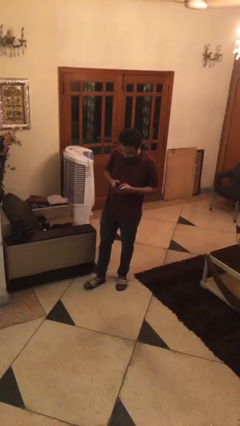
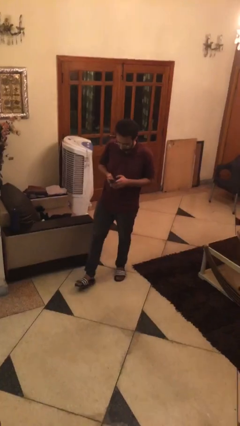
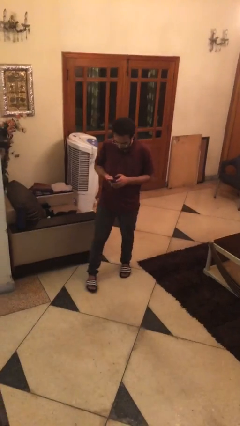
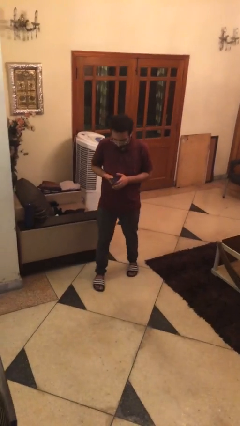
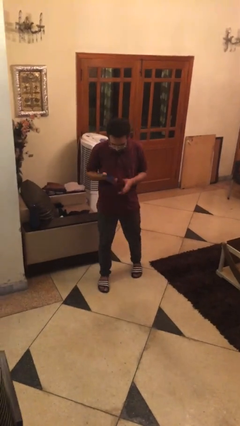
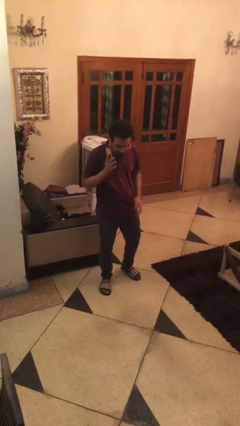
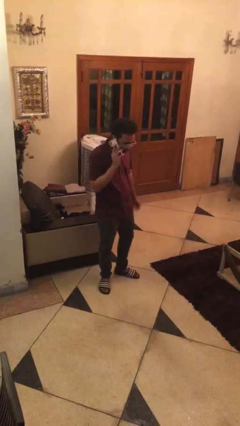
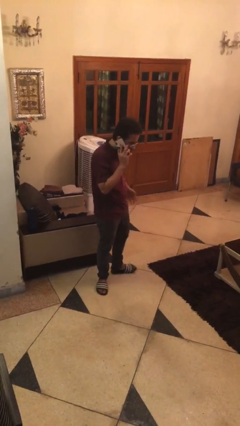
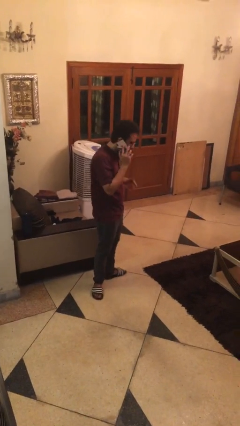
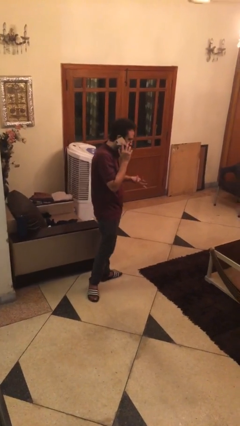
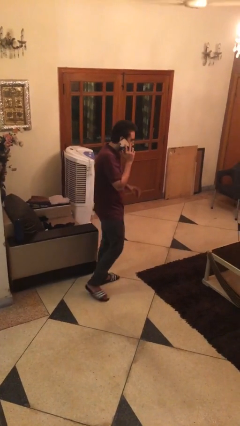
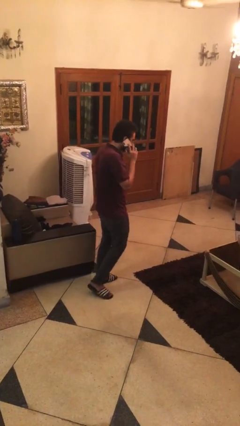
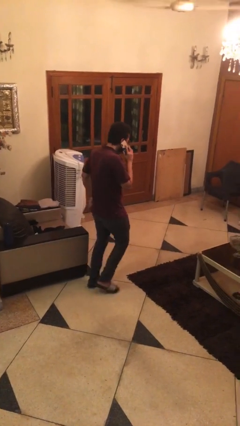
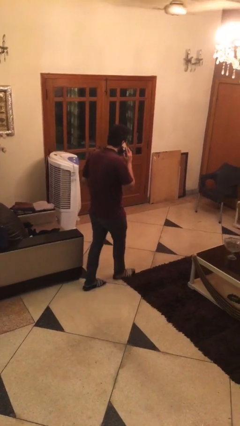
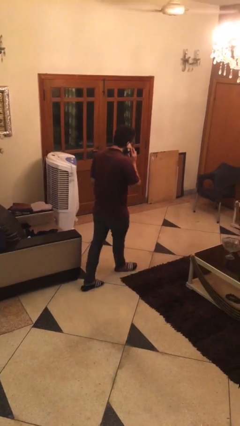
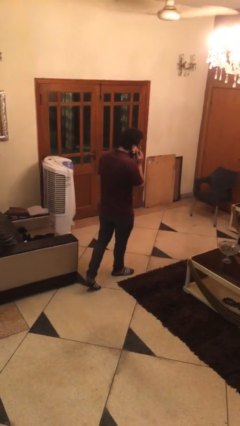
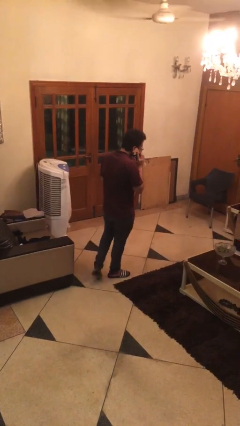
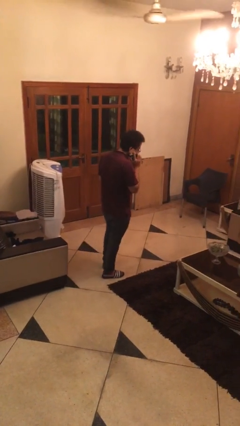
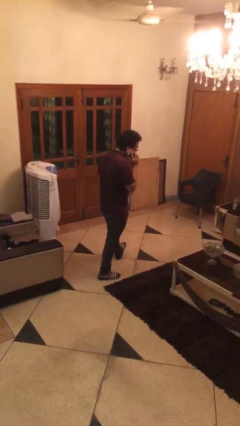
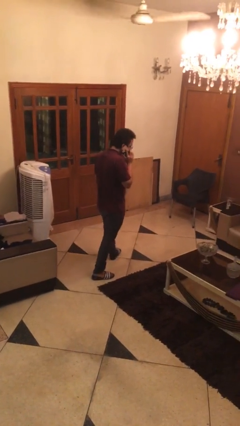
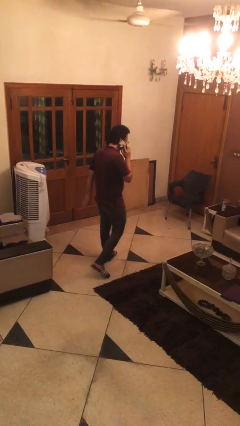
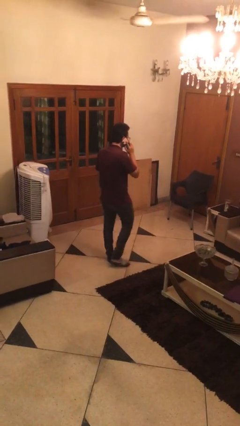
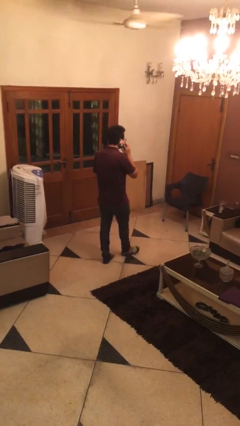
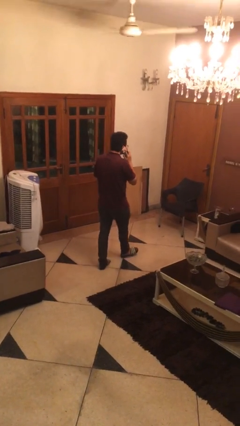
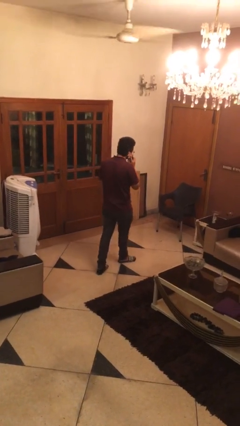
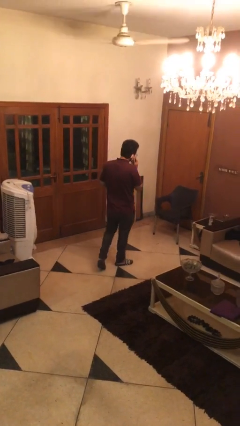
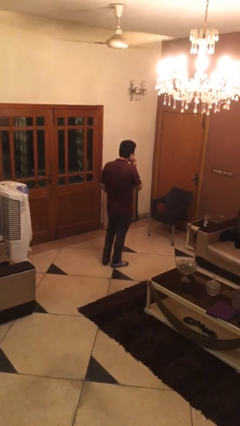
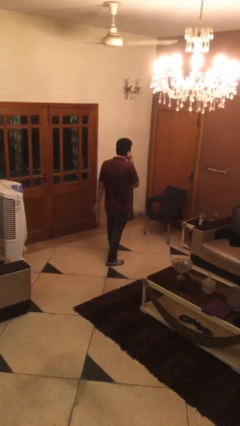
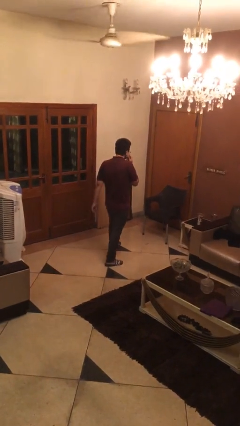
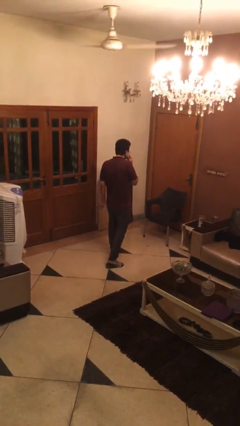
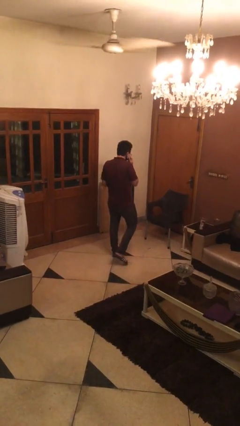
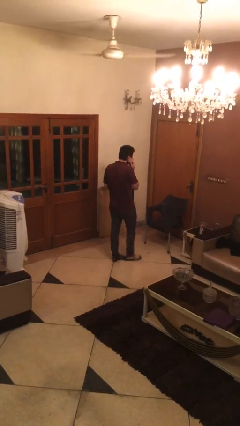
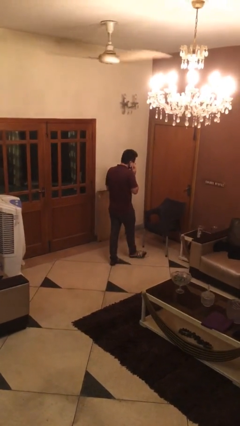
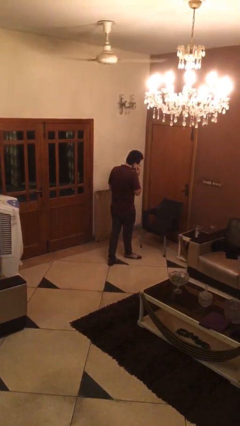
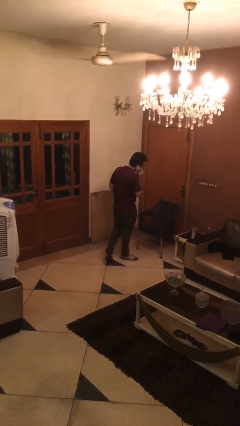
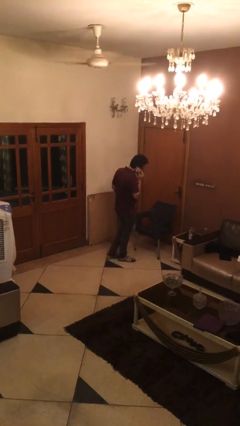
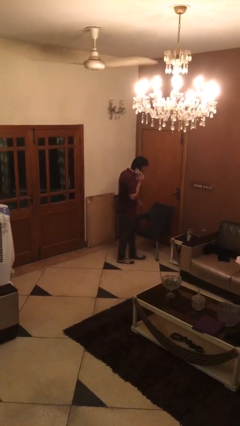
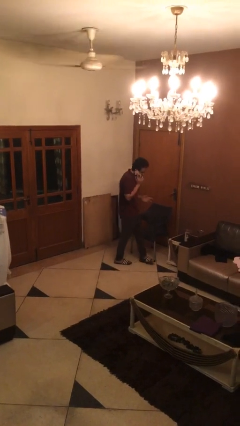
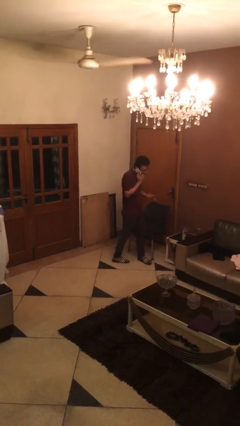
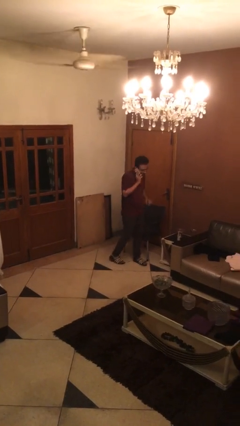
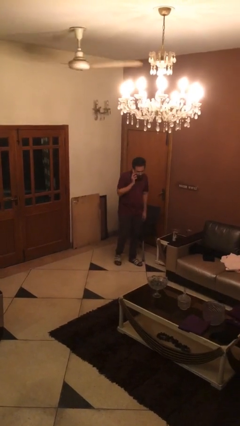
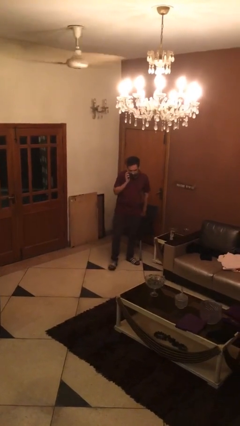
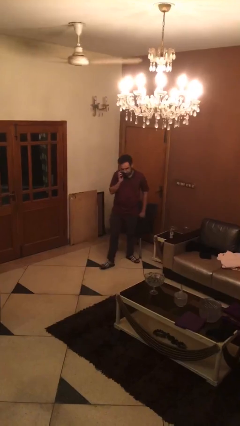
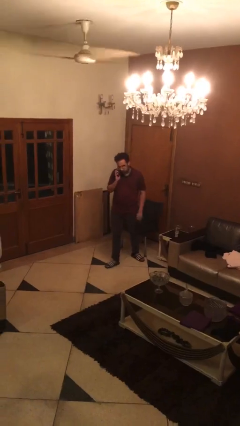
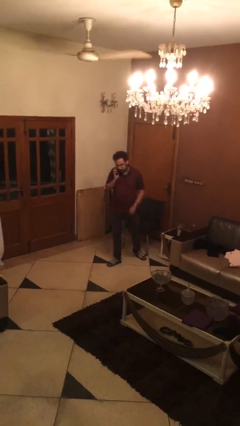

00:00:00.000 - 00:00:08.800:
person talks on phone

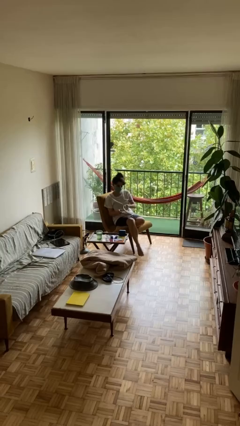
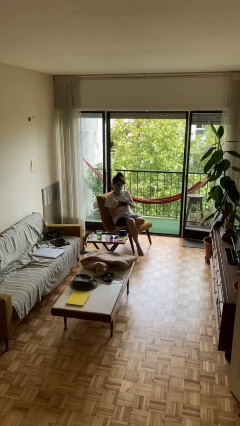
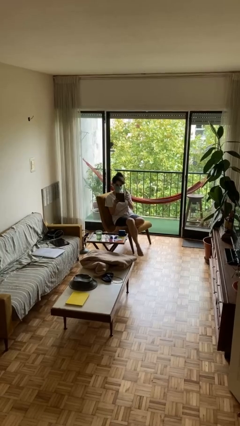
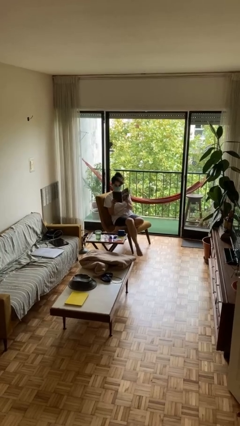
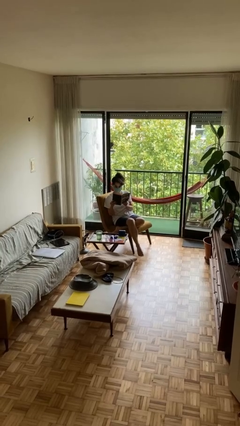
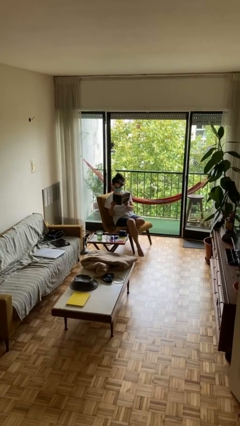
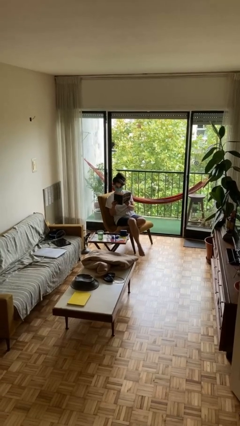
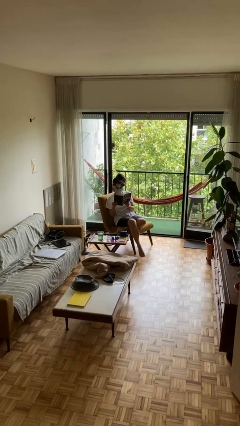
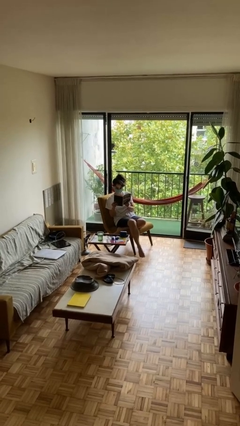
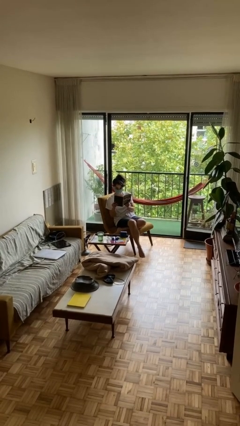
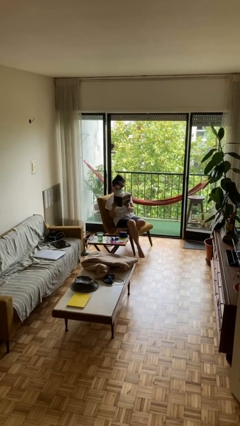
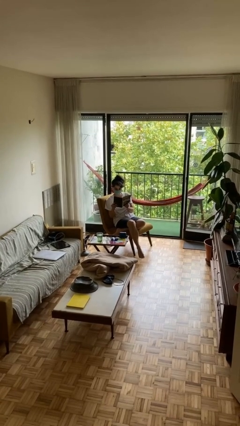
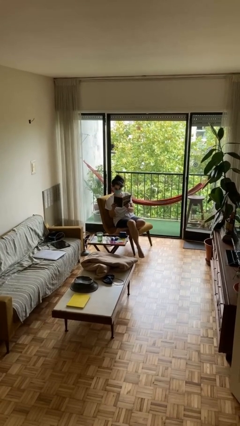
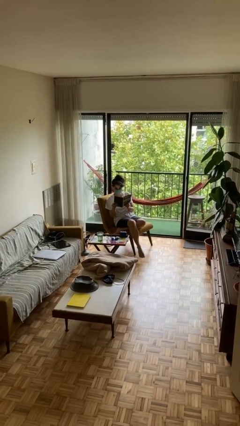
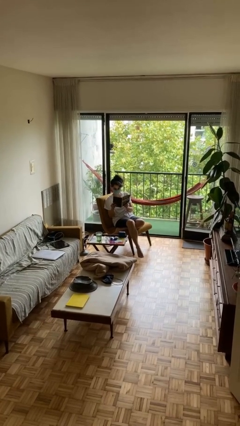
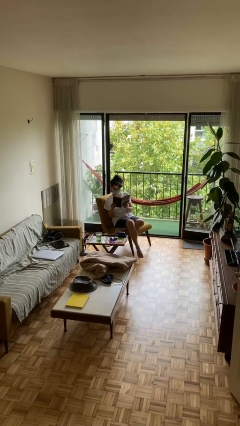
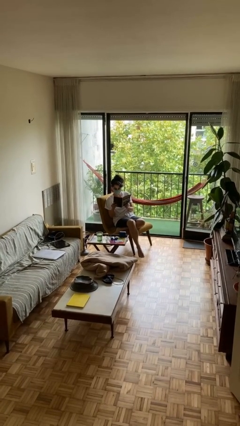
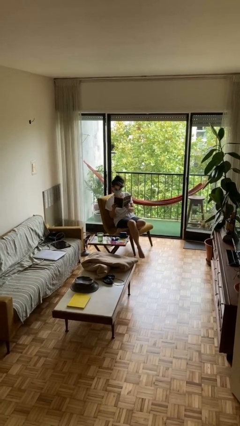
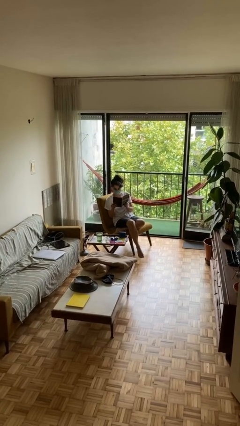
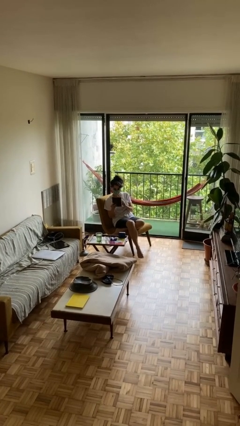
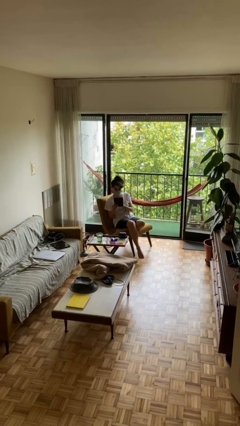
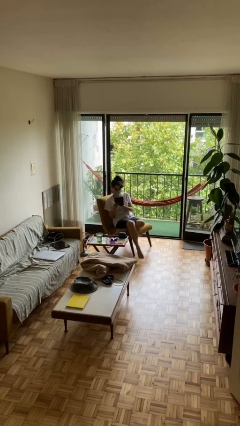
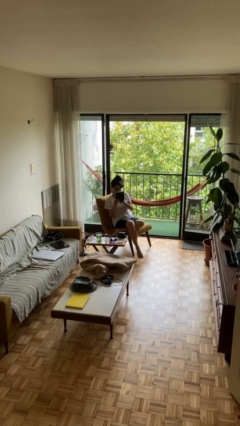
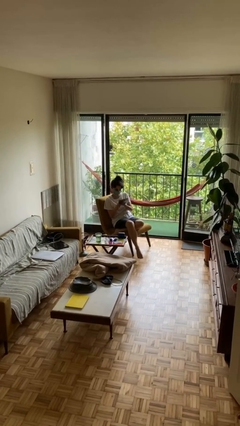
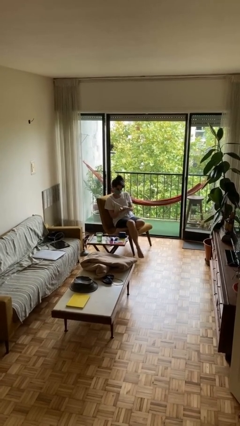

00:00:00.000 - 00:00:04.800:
person reads document

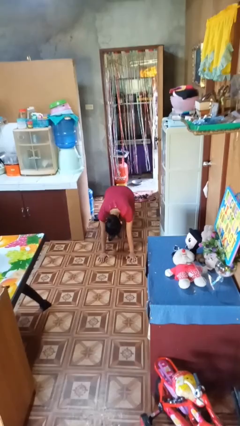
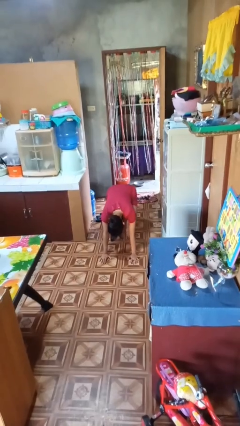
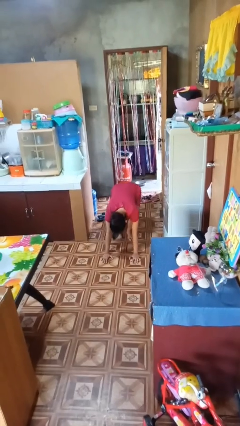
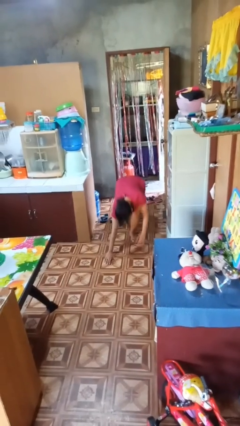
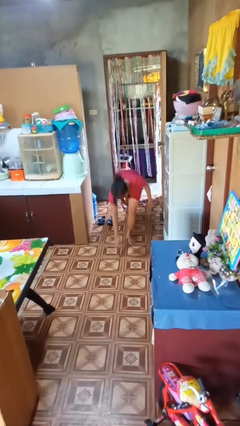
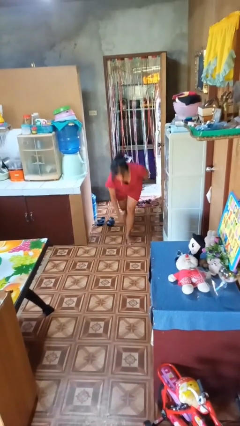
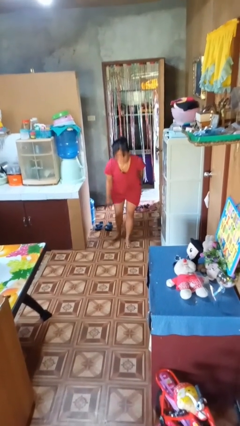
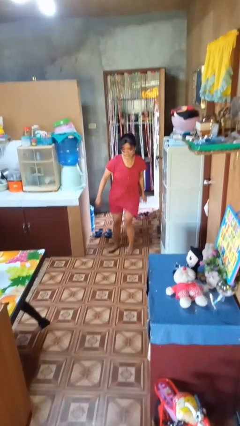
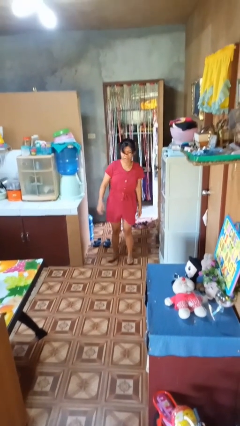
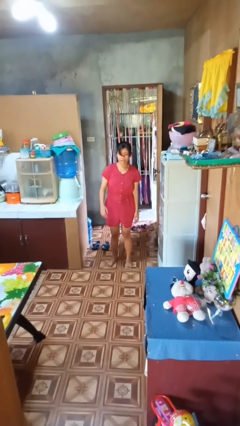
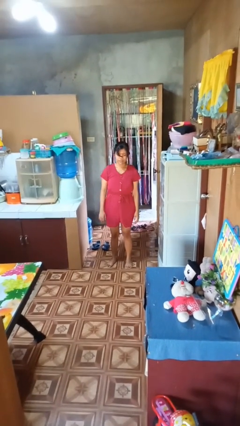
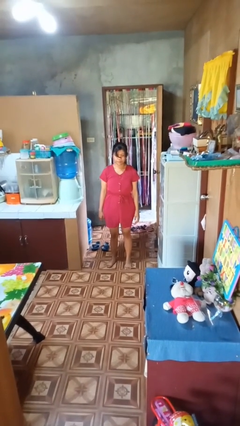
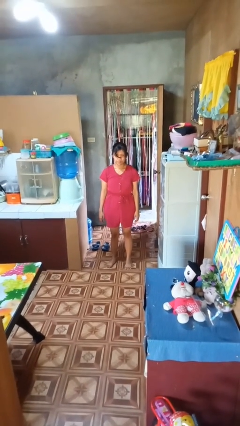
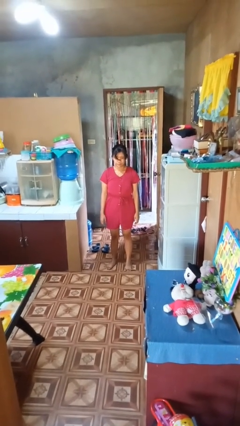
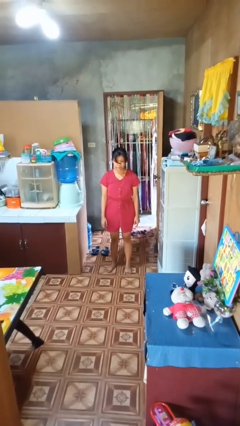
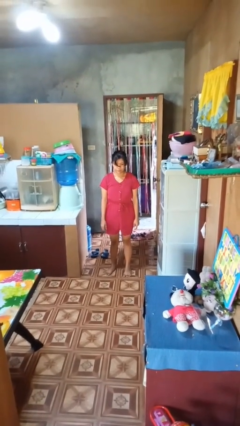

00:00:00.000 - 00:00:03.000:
person stands up from floor

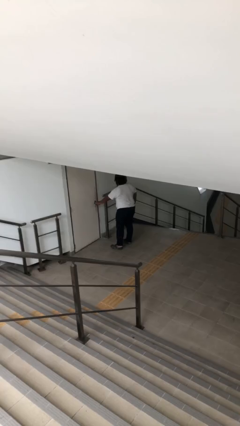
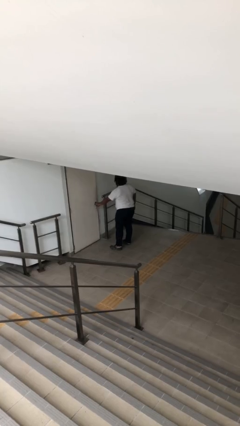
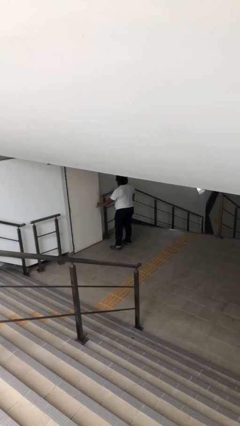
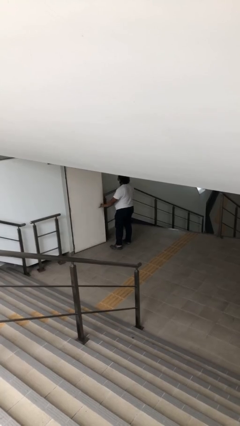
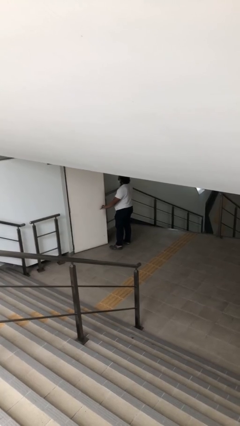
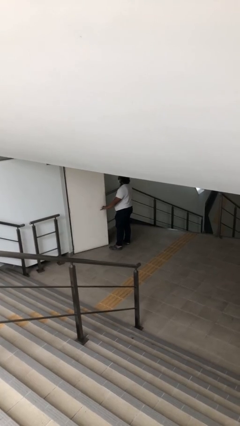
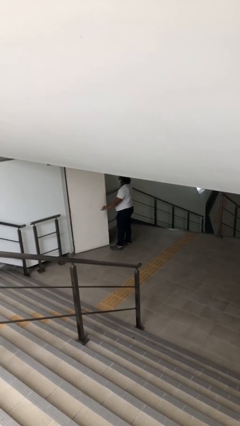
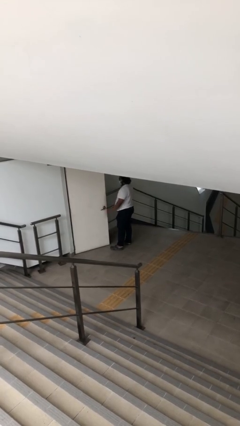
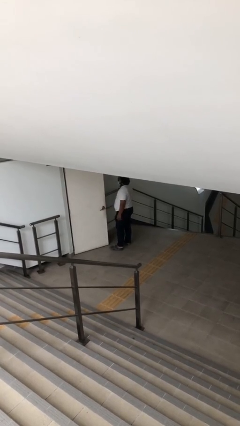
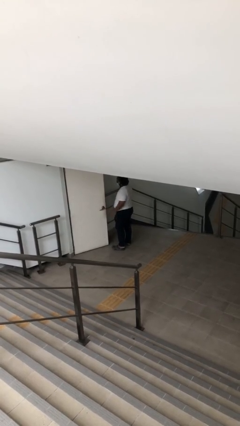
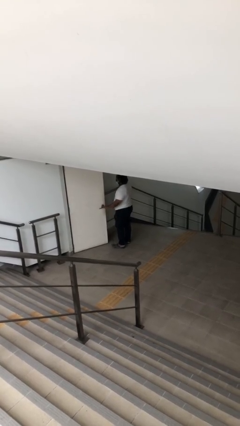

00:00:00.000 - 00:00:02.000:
person opens facility door
